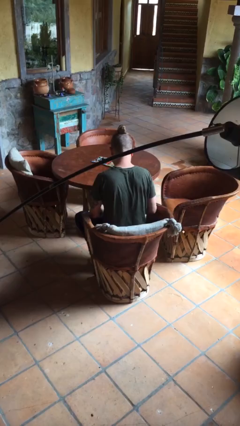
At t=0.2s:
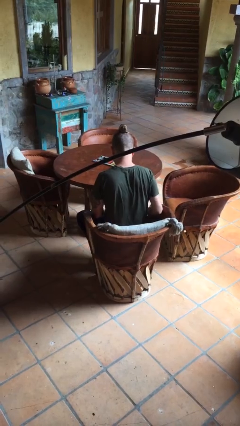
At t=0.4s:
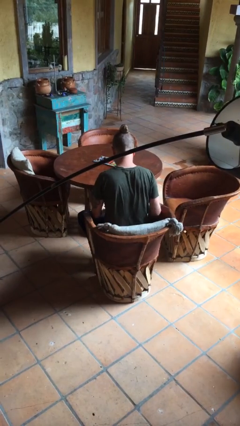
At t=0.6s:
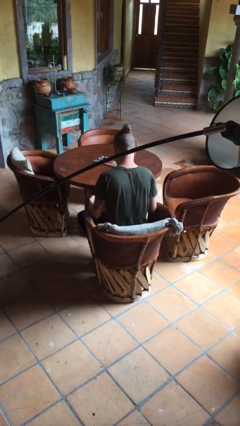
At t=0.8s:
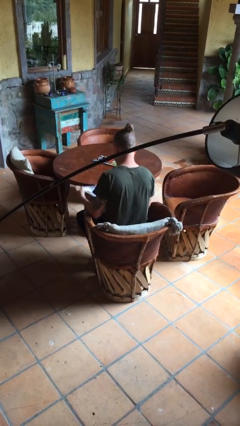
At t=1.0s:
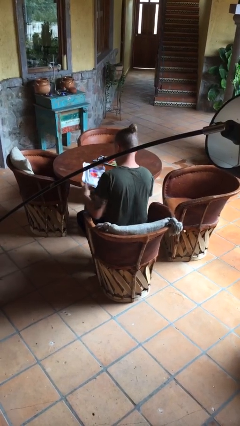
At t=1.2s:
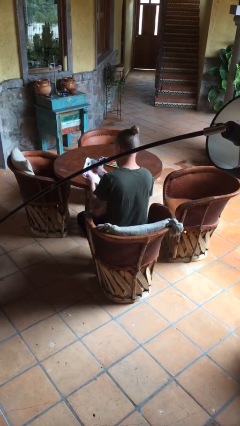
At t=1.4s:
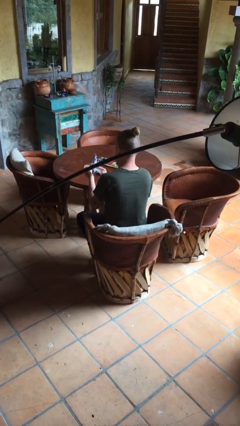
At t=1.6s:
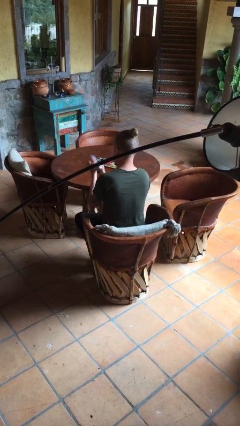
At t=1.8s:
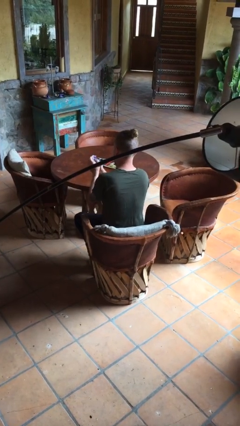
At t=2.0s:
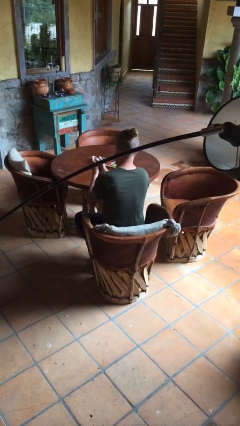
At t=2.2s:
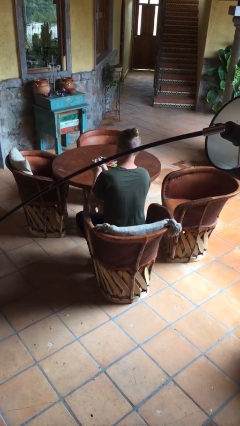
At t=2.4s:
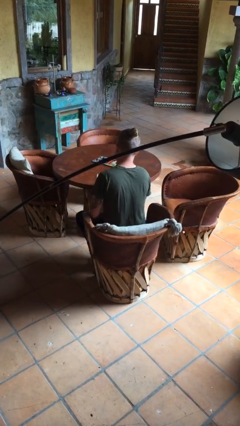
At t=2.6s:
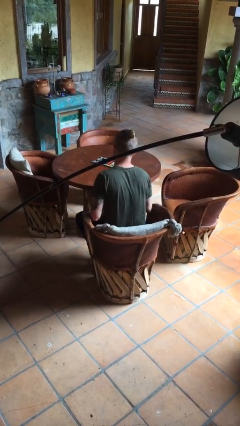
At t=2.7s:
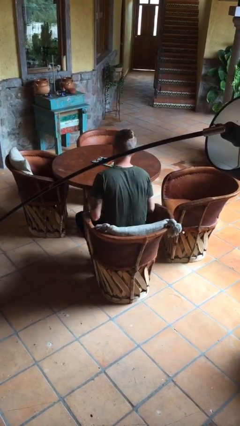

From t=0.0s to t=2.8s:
person crumples paper

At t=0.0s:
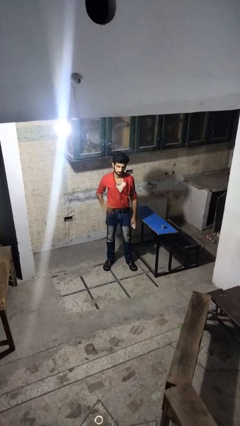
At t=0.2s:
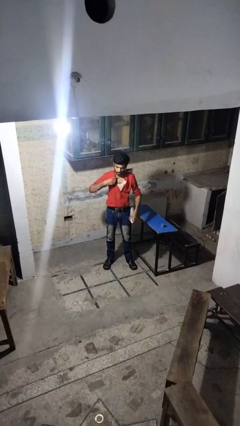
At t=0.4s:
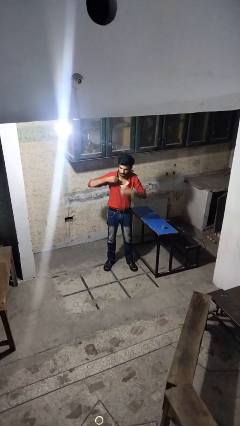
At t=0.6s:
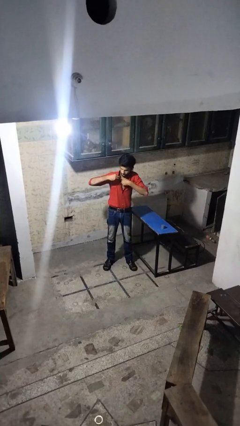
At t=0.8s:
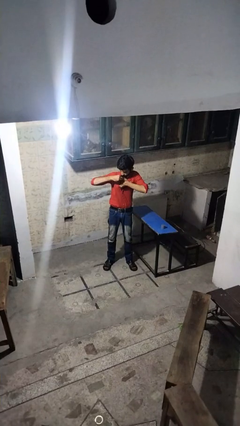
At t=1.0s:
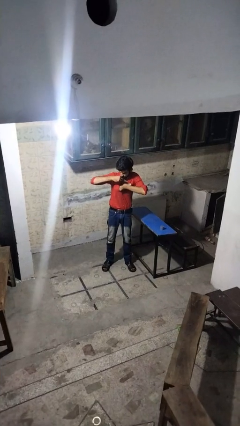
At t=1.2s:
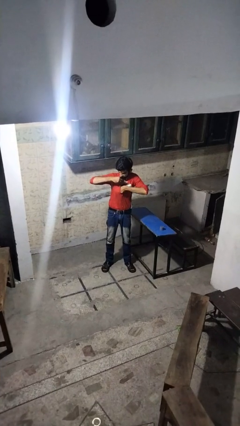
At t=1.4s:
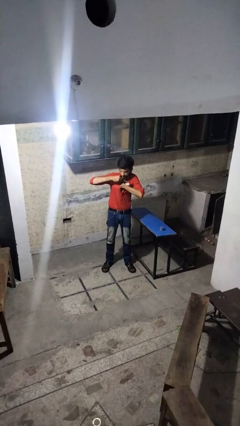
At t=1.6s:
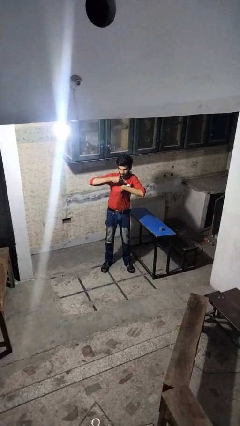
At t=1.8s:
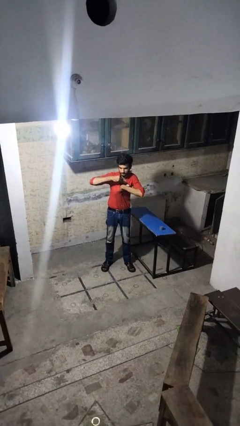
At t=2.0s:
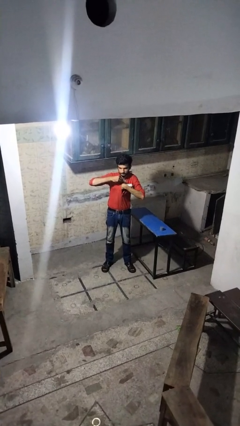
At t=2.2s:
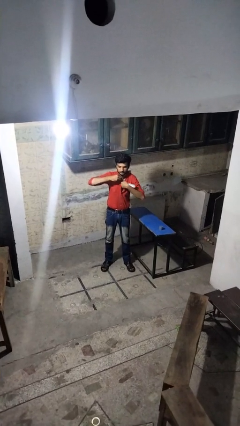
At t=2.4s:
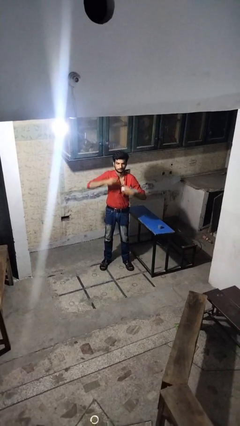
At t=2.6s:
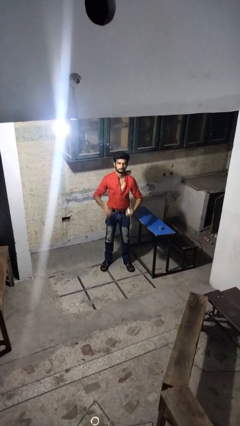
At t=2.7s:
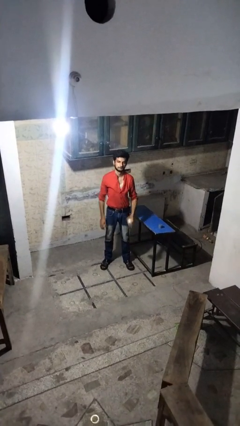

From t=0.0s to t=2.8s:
person applies deodorant

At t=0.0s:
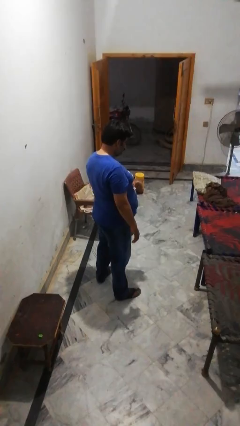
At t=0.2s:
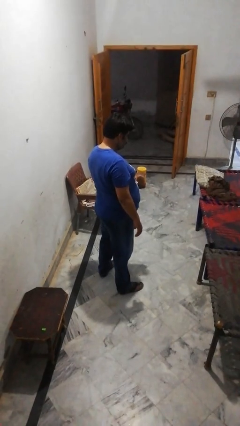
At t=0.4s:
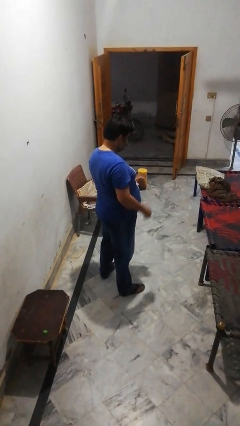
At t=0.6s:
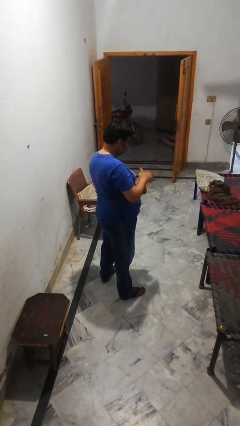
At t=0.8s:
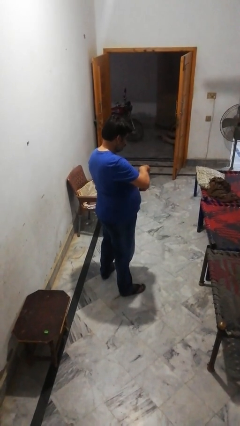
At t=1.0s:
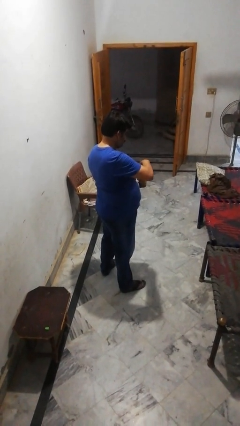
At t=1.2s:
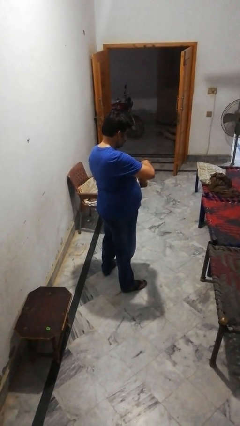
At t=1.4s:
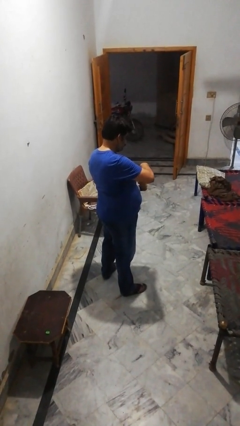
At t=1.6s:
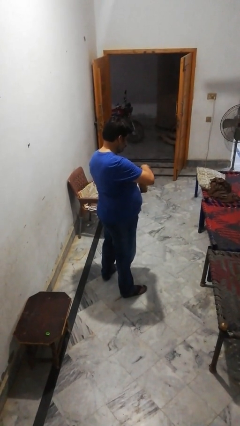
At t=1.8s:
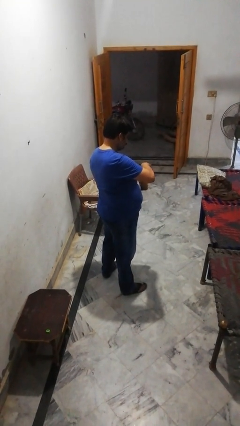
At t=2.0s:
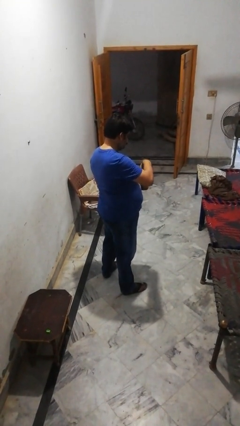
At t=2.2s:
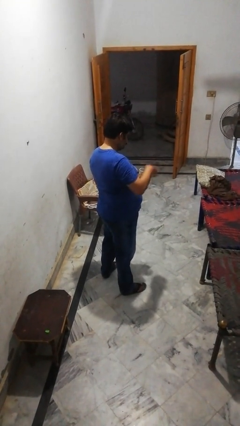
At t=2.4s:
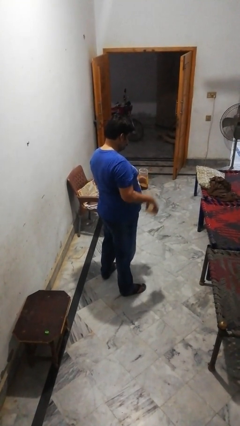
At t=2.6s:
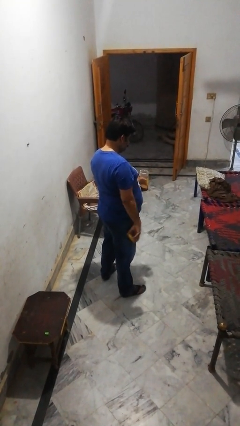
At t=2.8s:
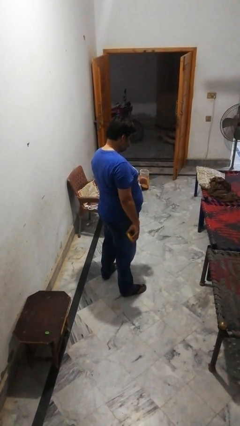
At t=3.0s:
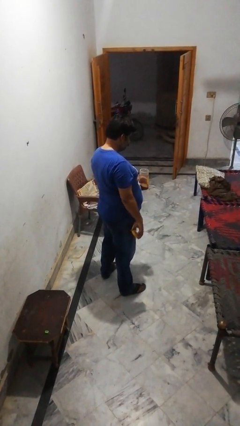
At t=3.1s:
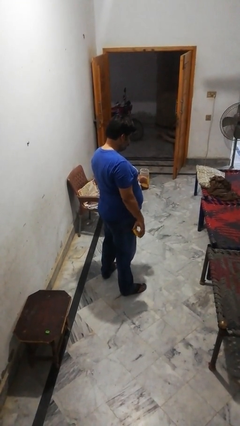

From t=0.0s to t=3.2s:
person opens jar

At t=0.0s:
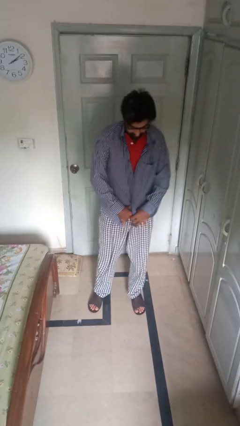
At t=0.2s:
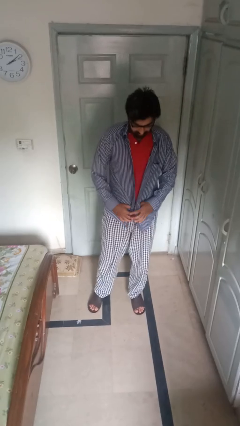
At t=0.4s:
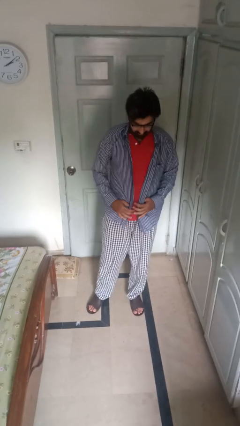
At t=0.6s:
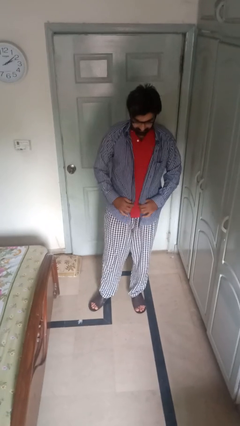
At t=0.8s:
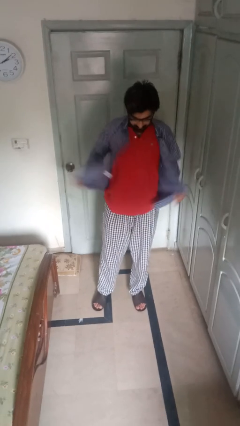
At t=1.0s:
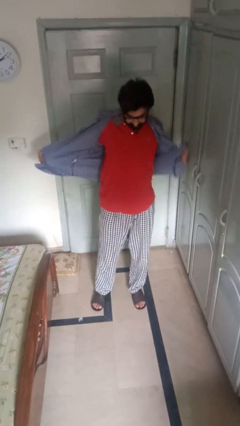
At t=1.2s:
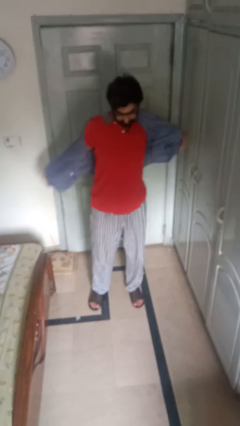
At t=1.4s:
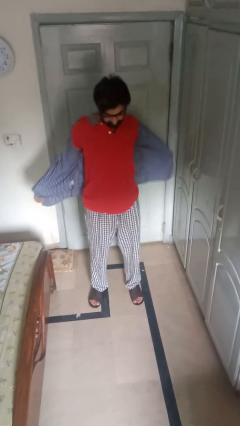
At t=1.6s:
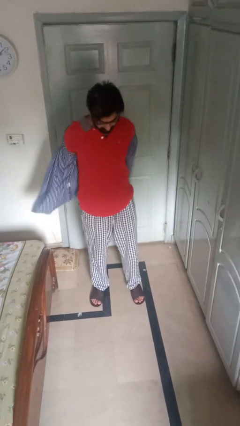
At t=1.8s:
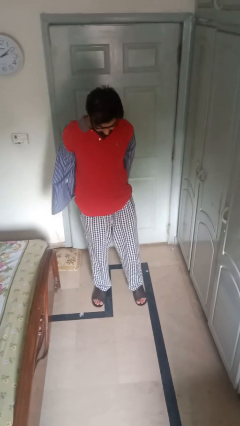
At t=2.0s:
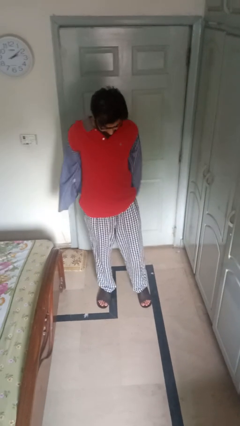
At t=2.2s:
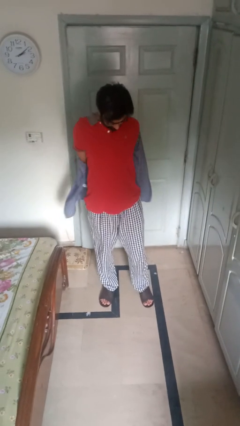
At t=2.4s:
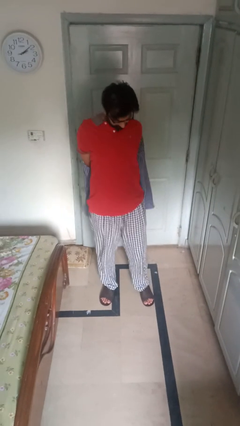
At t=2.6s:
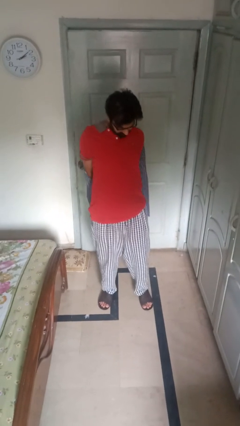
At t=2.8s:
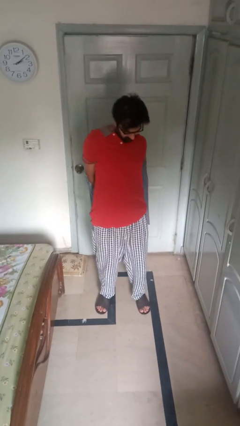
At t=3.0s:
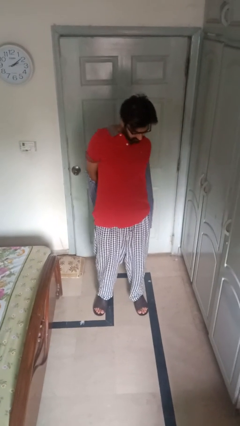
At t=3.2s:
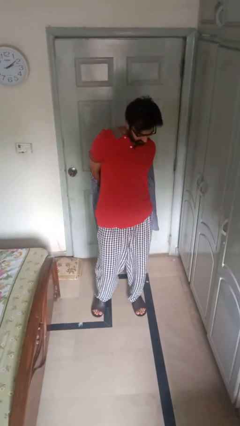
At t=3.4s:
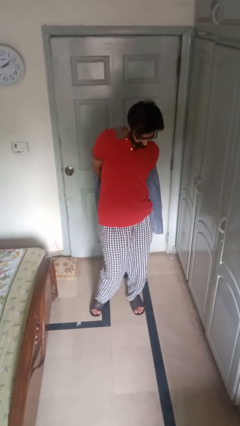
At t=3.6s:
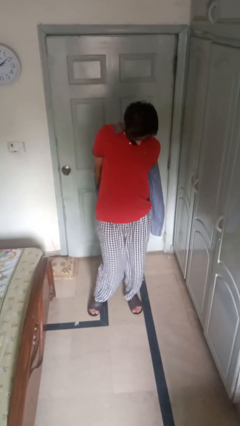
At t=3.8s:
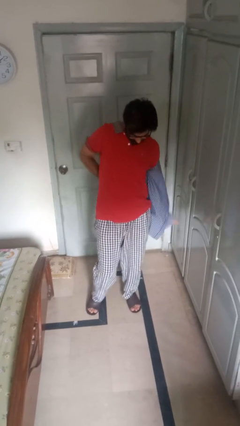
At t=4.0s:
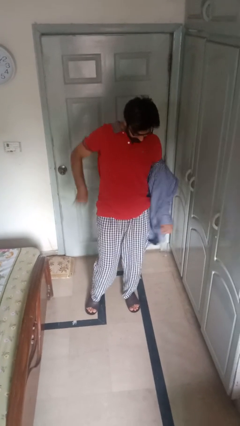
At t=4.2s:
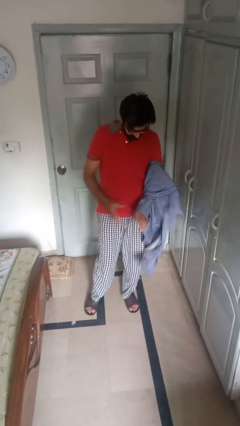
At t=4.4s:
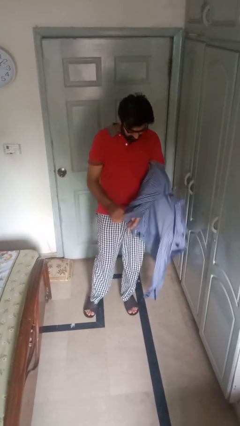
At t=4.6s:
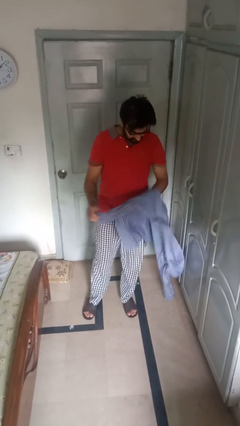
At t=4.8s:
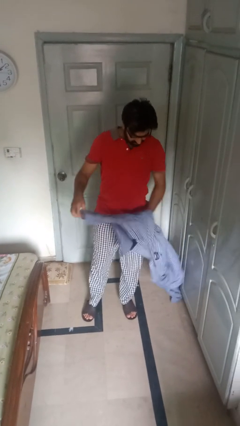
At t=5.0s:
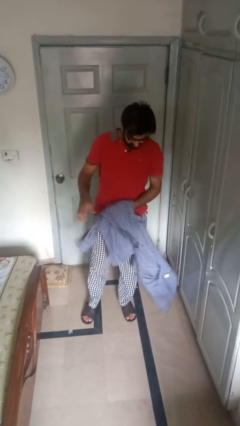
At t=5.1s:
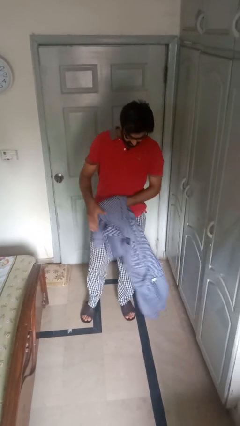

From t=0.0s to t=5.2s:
person takes off shirt

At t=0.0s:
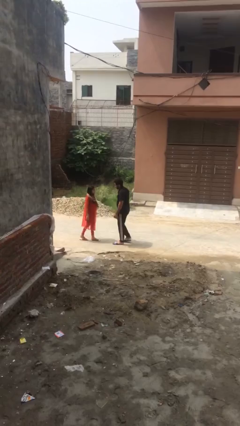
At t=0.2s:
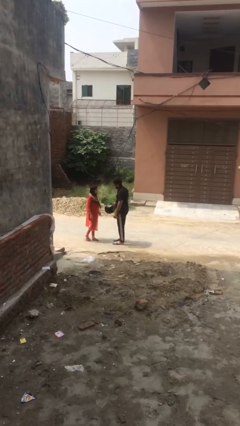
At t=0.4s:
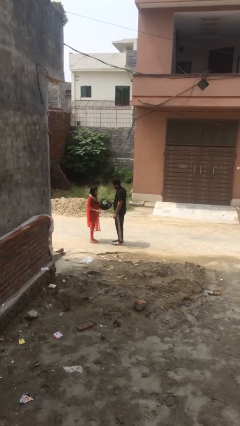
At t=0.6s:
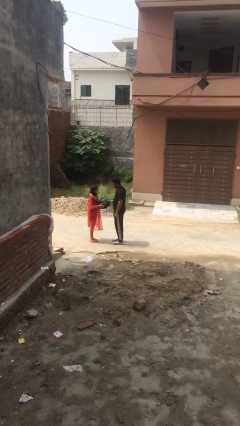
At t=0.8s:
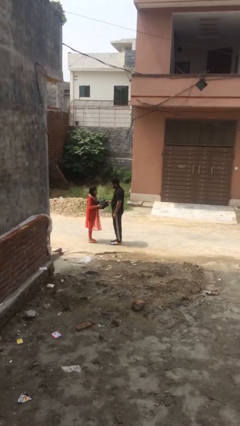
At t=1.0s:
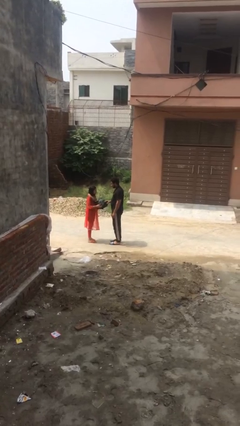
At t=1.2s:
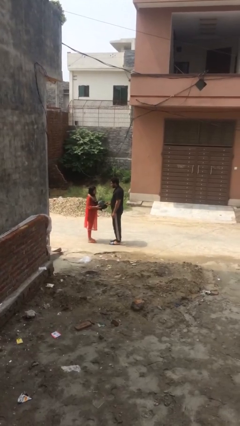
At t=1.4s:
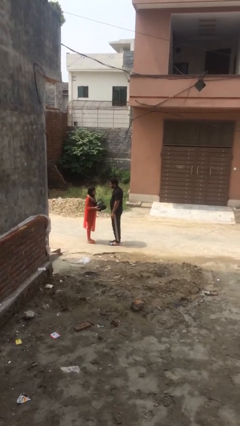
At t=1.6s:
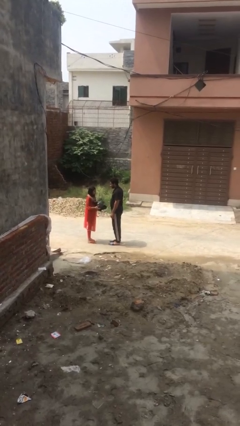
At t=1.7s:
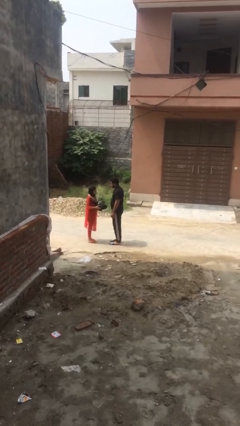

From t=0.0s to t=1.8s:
person transfers object to person

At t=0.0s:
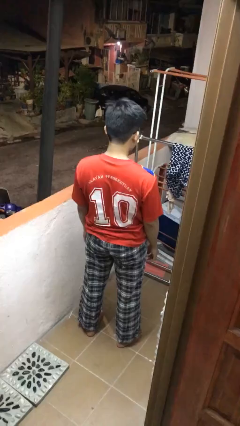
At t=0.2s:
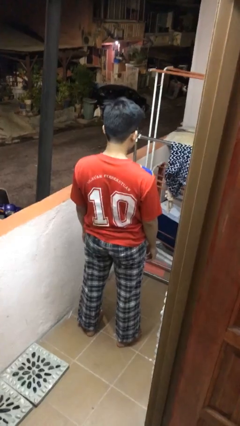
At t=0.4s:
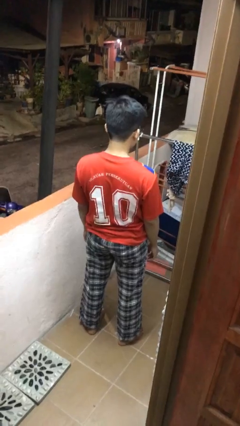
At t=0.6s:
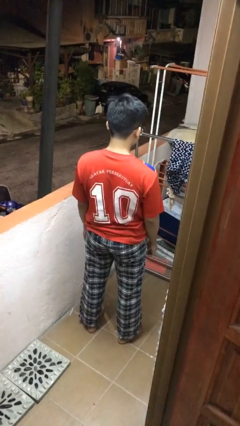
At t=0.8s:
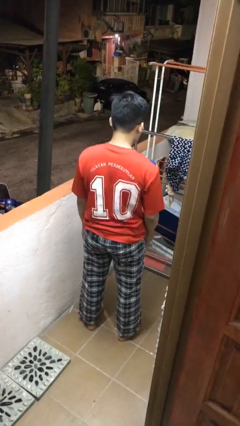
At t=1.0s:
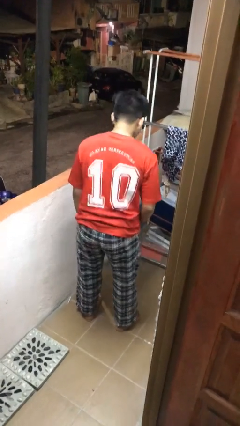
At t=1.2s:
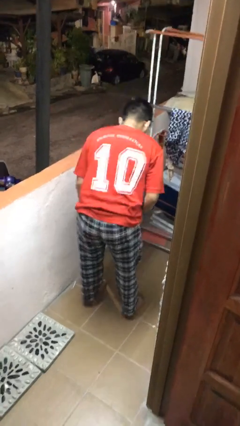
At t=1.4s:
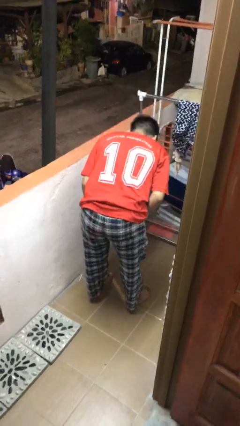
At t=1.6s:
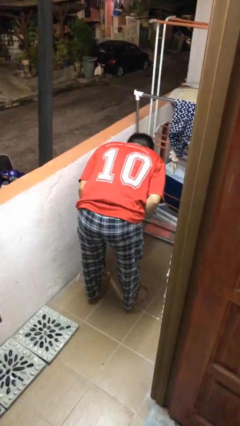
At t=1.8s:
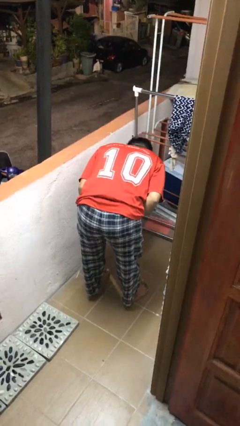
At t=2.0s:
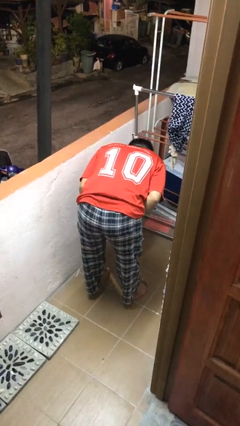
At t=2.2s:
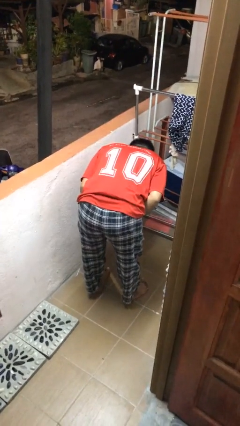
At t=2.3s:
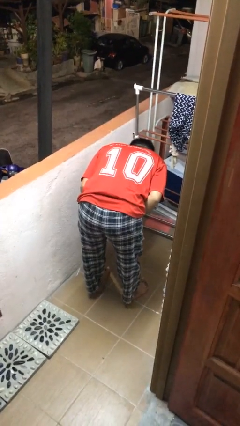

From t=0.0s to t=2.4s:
person bows
